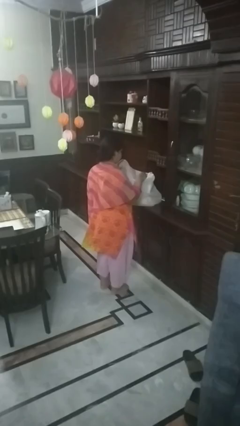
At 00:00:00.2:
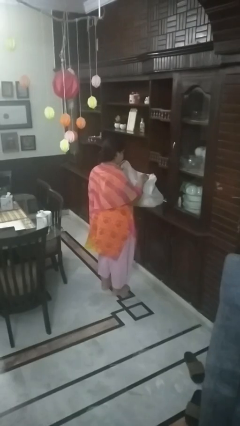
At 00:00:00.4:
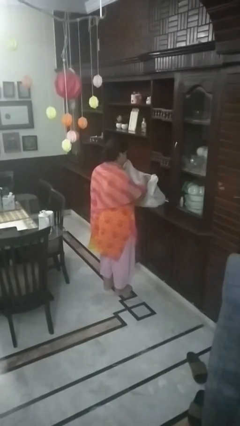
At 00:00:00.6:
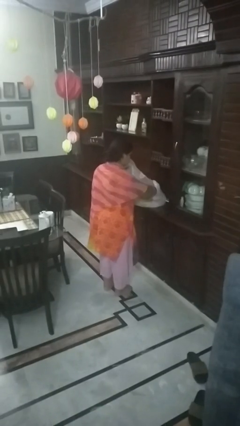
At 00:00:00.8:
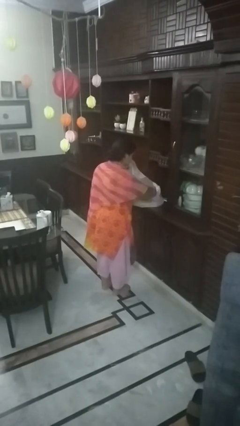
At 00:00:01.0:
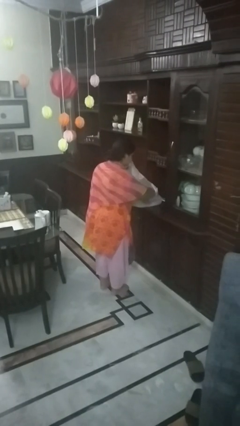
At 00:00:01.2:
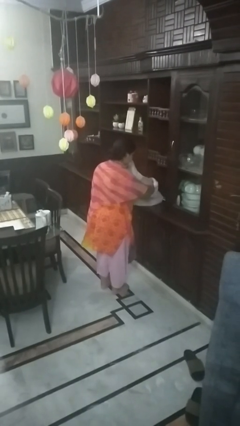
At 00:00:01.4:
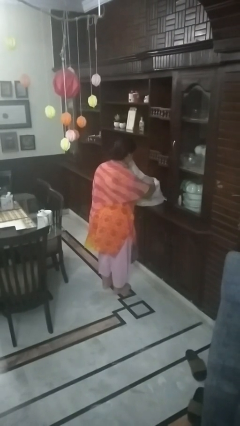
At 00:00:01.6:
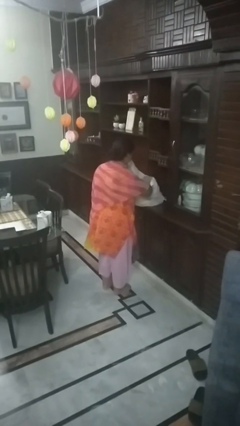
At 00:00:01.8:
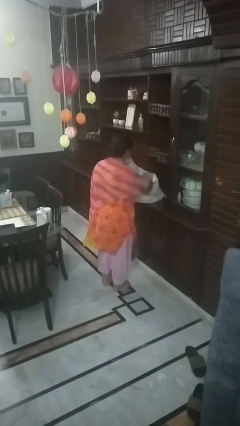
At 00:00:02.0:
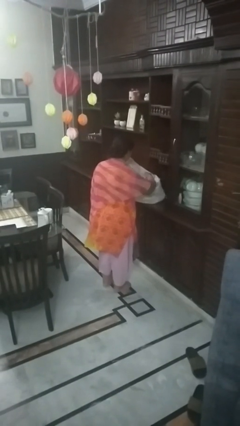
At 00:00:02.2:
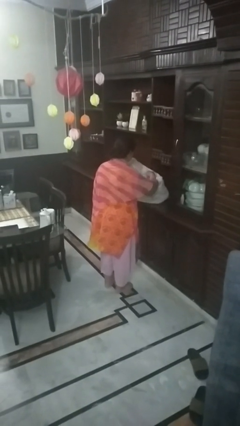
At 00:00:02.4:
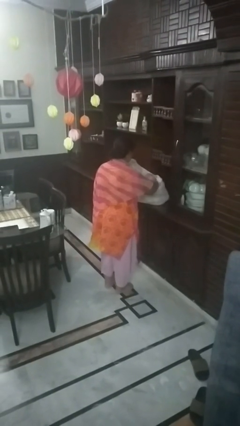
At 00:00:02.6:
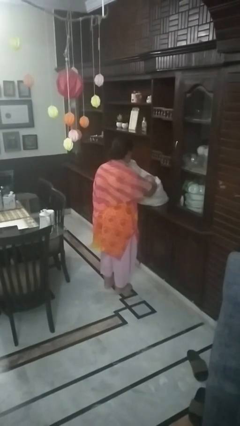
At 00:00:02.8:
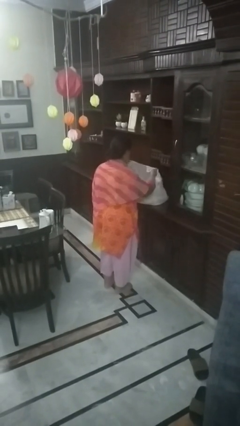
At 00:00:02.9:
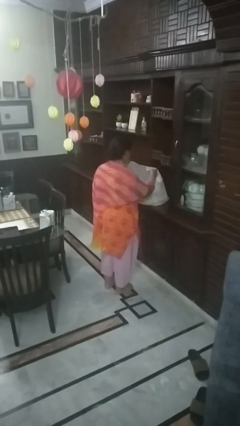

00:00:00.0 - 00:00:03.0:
person searches in bag

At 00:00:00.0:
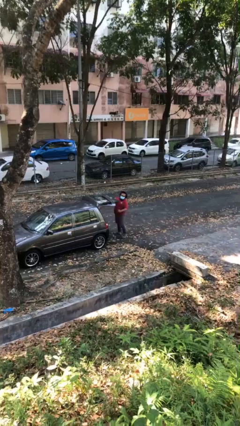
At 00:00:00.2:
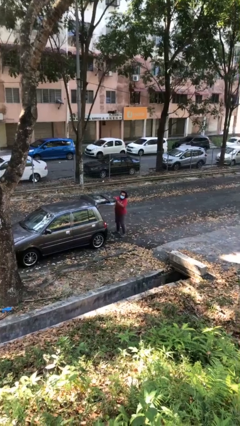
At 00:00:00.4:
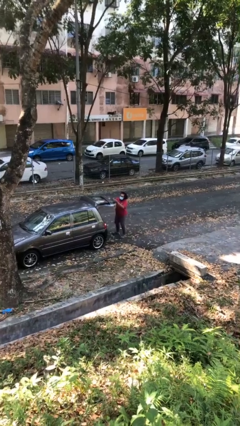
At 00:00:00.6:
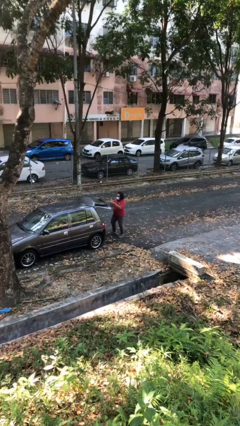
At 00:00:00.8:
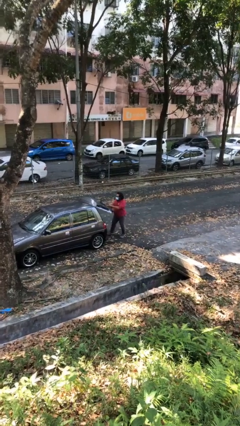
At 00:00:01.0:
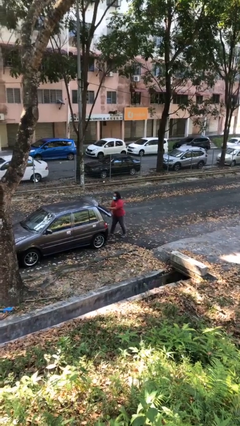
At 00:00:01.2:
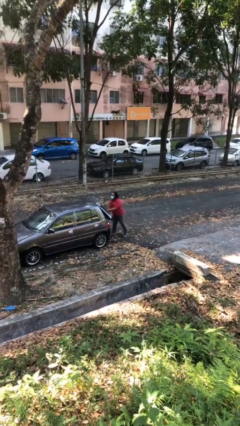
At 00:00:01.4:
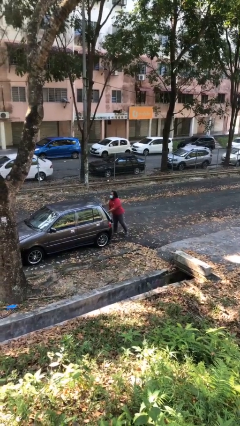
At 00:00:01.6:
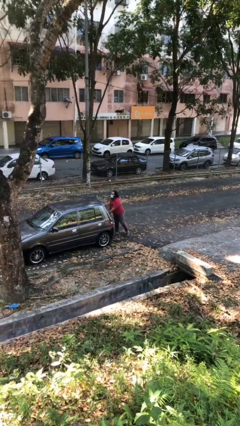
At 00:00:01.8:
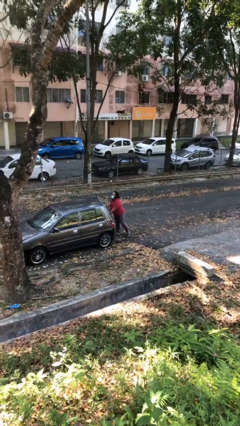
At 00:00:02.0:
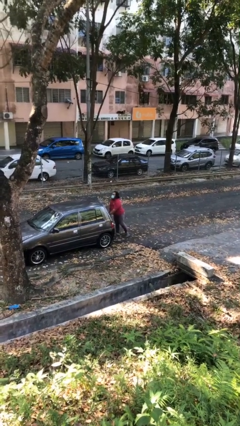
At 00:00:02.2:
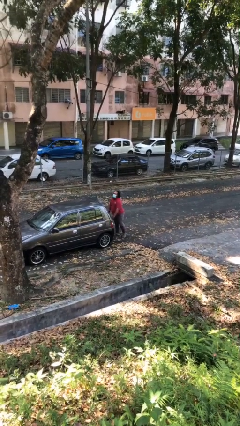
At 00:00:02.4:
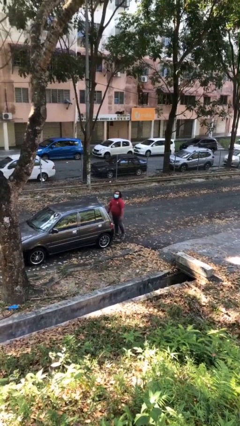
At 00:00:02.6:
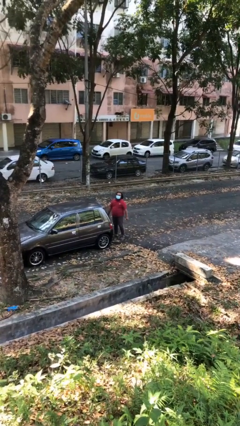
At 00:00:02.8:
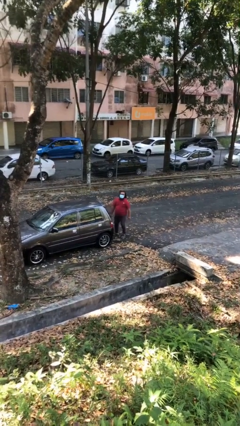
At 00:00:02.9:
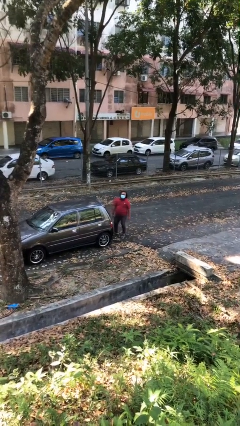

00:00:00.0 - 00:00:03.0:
person closes car trunk

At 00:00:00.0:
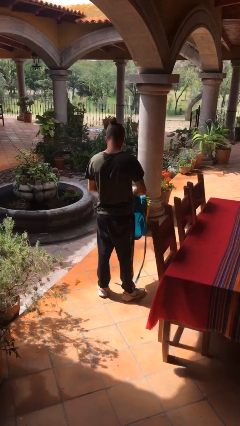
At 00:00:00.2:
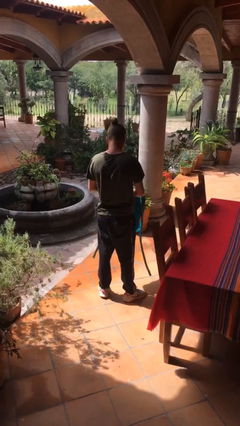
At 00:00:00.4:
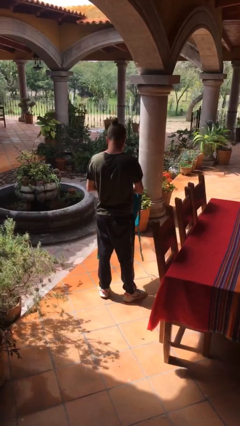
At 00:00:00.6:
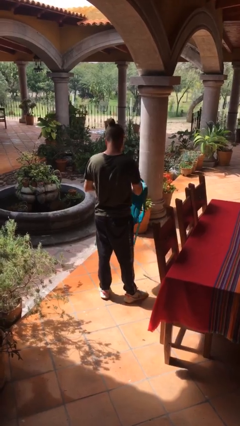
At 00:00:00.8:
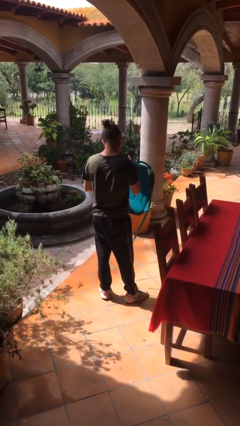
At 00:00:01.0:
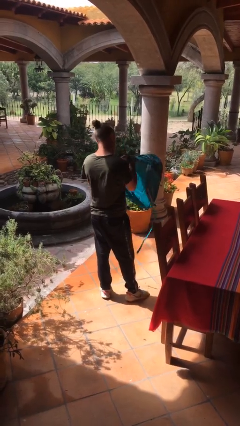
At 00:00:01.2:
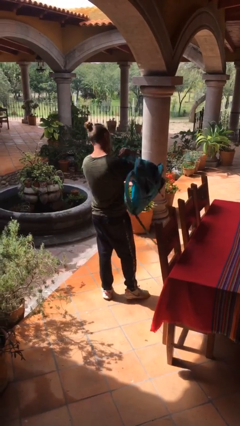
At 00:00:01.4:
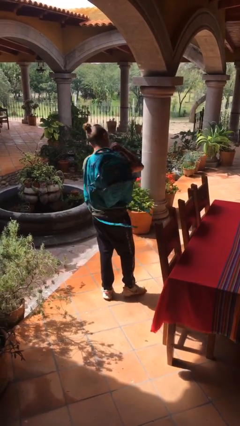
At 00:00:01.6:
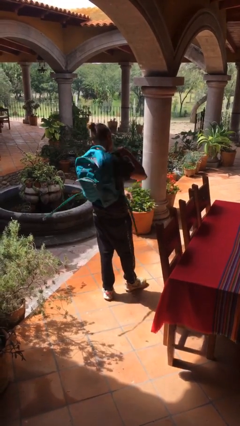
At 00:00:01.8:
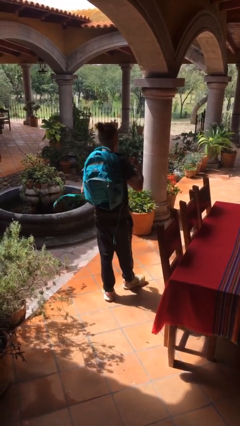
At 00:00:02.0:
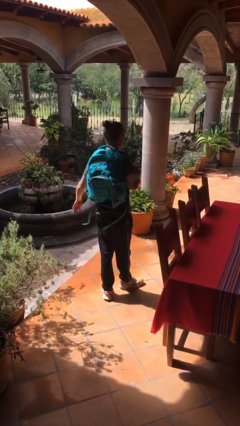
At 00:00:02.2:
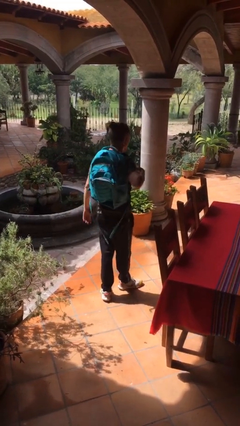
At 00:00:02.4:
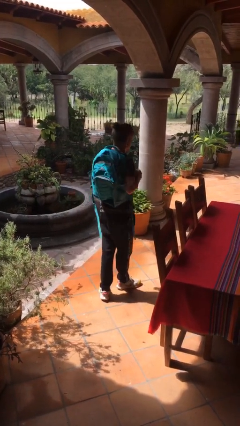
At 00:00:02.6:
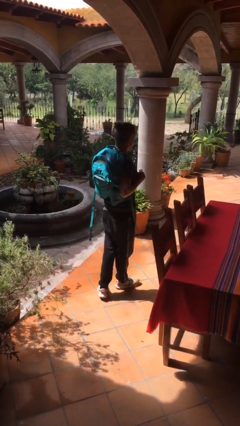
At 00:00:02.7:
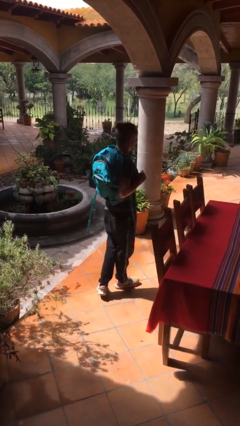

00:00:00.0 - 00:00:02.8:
person puts on backpack

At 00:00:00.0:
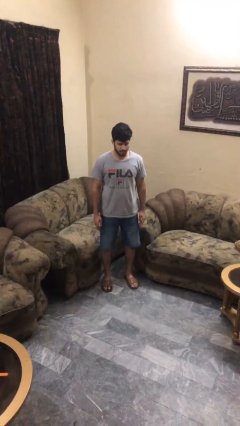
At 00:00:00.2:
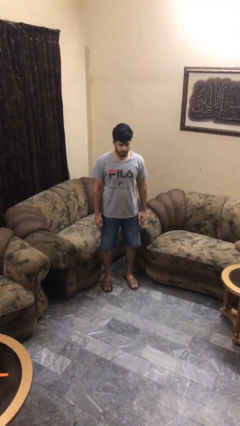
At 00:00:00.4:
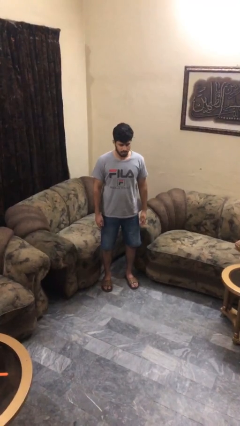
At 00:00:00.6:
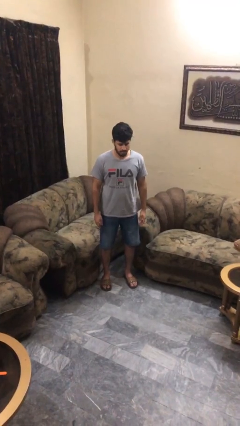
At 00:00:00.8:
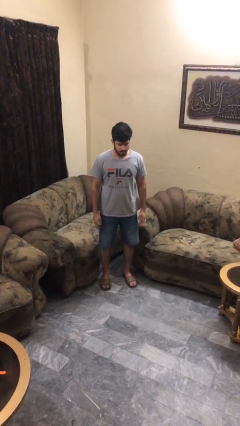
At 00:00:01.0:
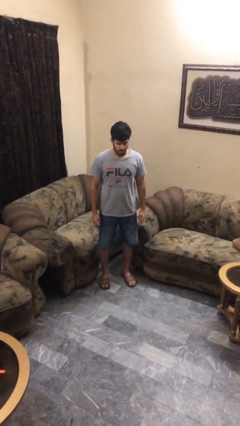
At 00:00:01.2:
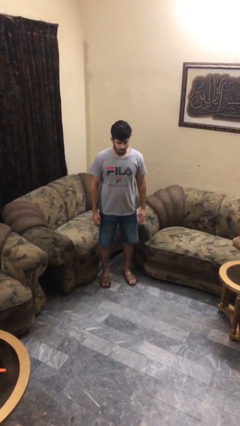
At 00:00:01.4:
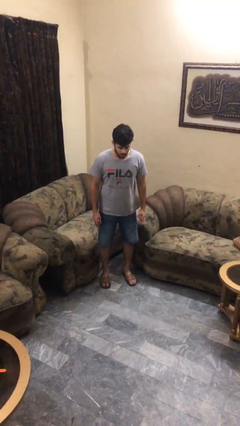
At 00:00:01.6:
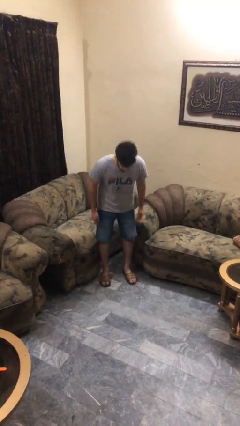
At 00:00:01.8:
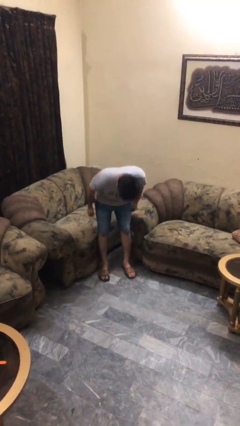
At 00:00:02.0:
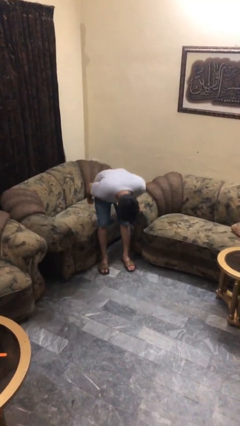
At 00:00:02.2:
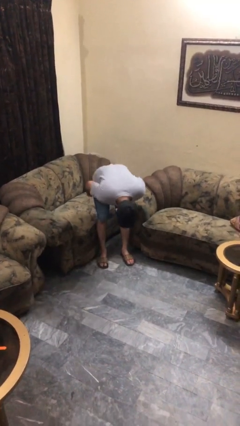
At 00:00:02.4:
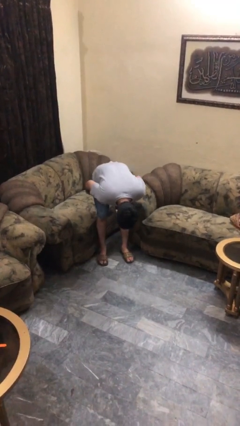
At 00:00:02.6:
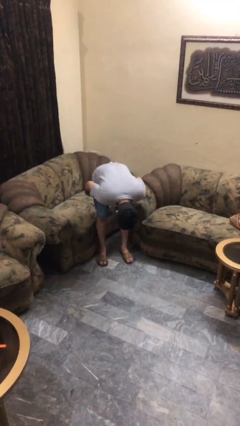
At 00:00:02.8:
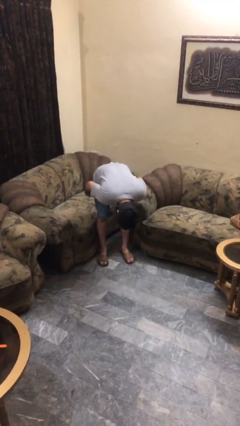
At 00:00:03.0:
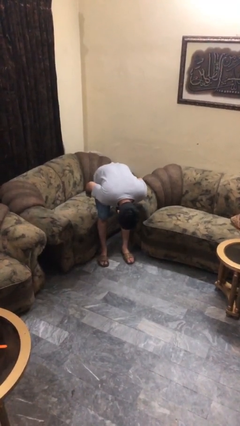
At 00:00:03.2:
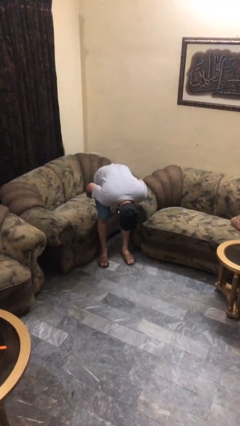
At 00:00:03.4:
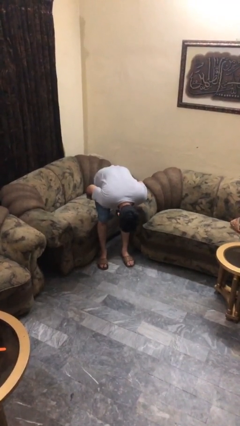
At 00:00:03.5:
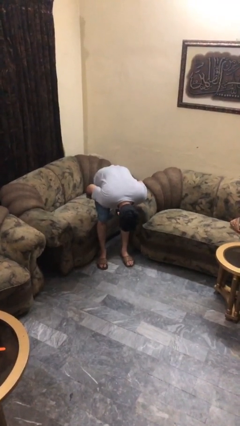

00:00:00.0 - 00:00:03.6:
person bows

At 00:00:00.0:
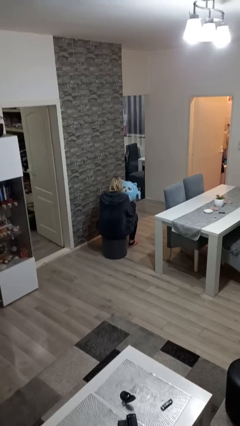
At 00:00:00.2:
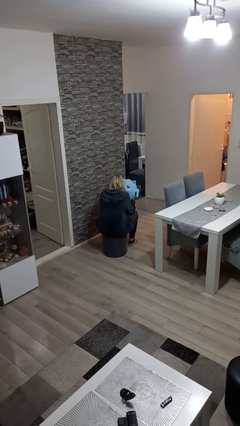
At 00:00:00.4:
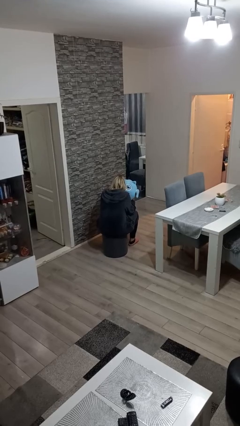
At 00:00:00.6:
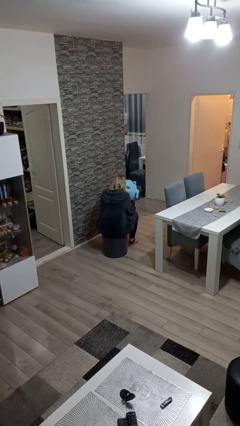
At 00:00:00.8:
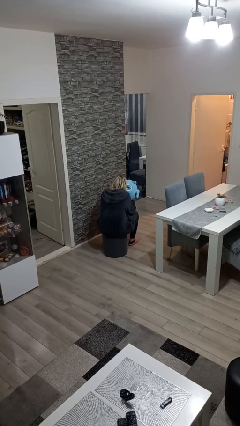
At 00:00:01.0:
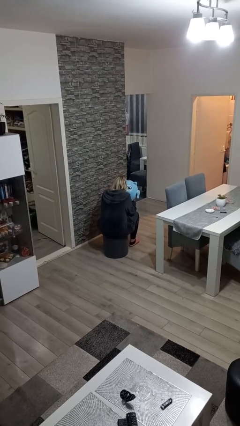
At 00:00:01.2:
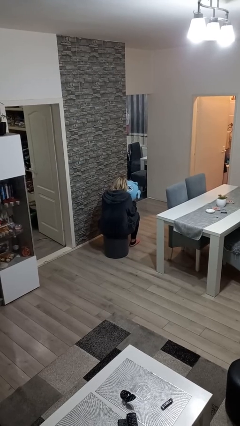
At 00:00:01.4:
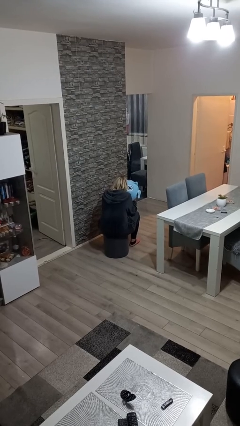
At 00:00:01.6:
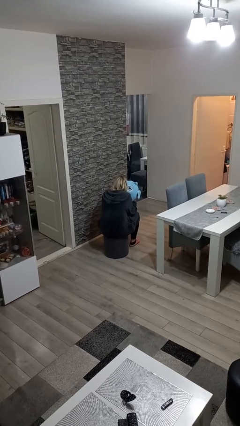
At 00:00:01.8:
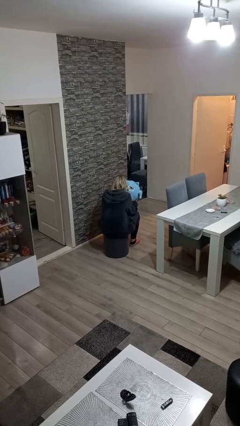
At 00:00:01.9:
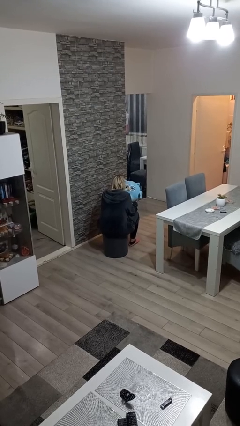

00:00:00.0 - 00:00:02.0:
person hugs stuffed animal

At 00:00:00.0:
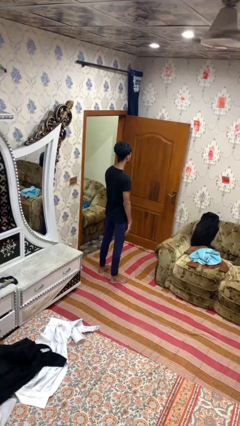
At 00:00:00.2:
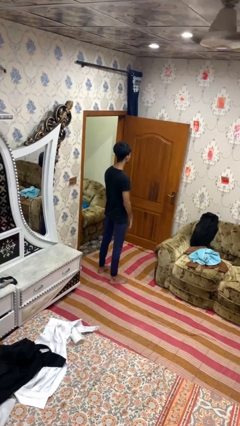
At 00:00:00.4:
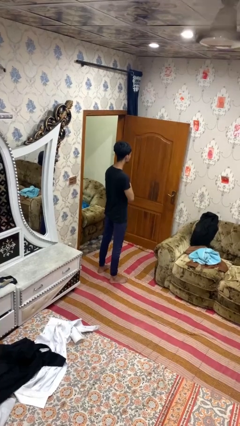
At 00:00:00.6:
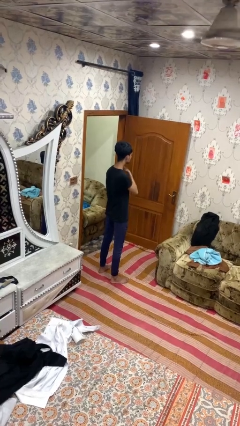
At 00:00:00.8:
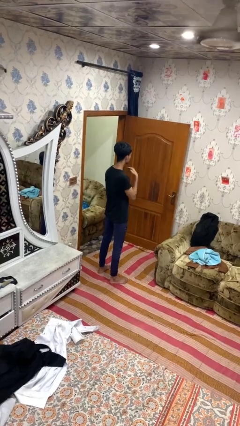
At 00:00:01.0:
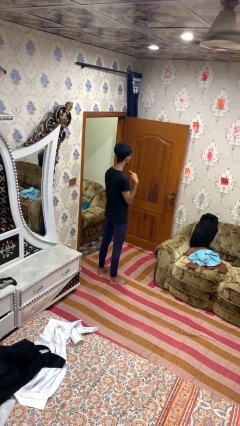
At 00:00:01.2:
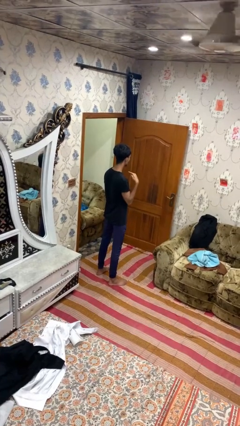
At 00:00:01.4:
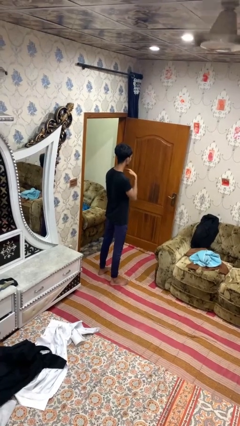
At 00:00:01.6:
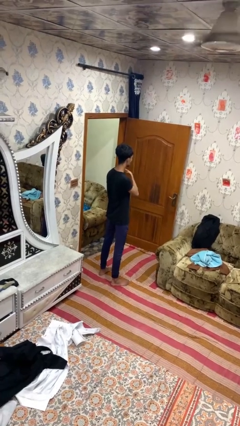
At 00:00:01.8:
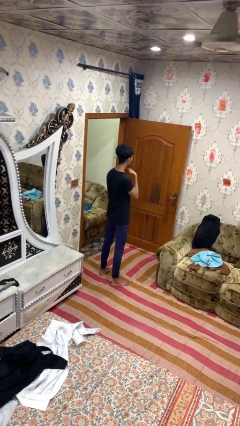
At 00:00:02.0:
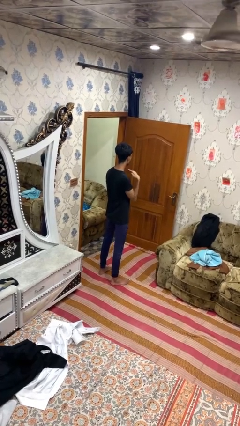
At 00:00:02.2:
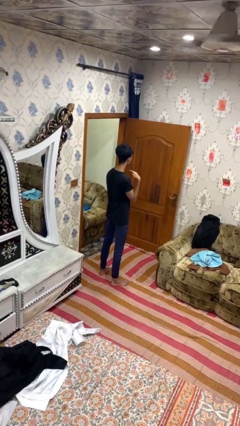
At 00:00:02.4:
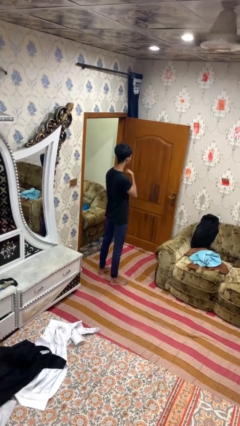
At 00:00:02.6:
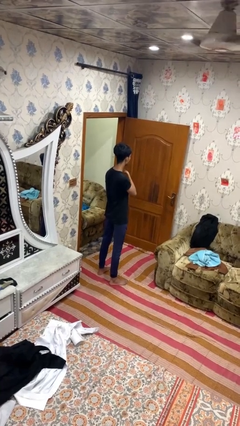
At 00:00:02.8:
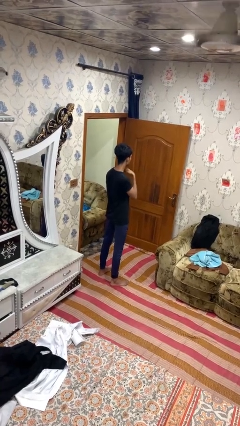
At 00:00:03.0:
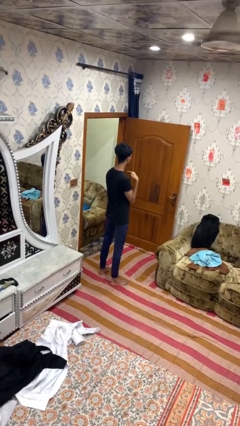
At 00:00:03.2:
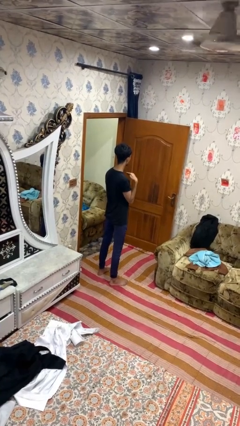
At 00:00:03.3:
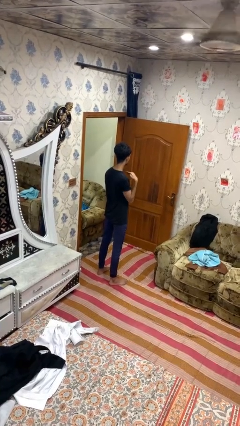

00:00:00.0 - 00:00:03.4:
person gestures cut
